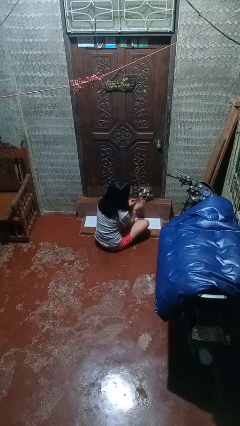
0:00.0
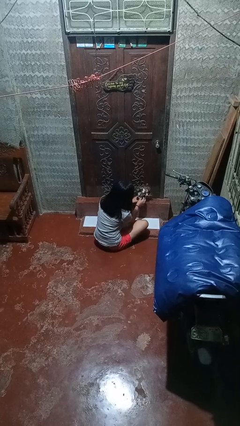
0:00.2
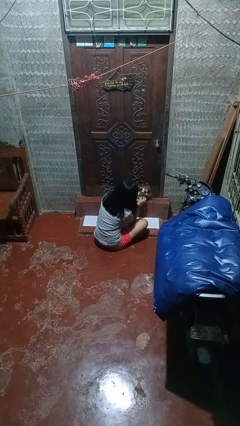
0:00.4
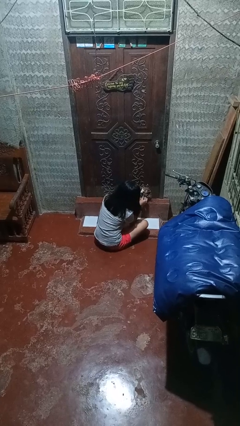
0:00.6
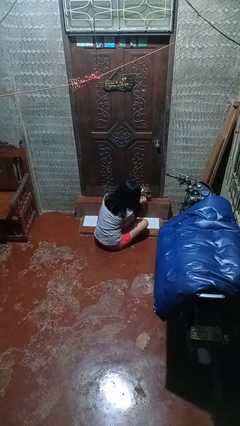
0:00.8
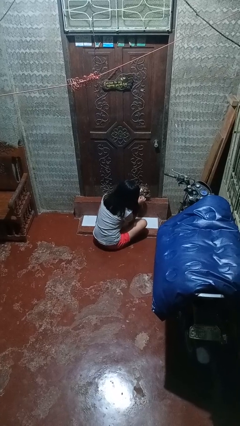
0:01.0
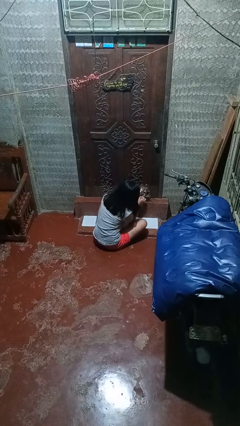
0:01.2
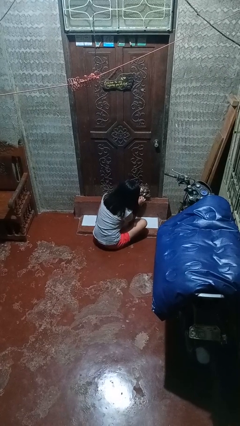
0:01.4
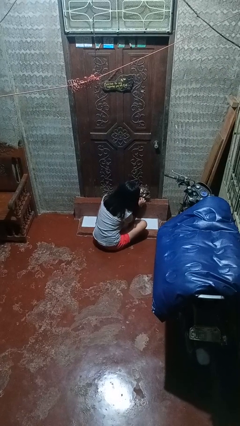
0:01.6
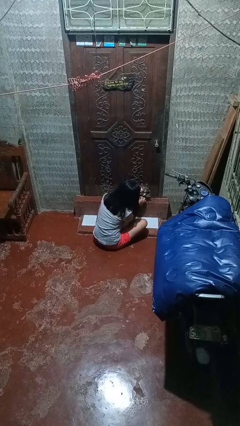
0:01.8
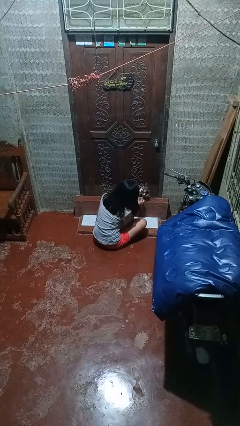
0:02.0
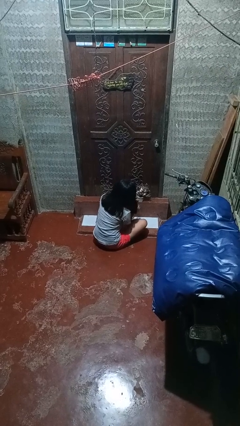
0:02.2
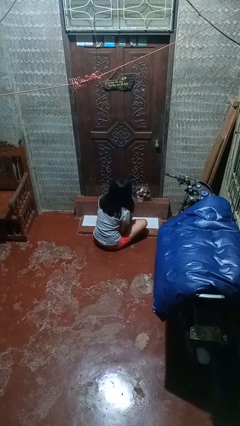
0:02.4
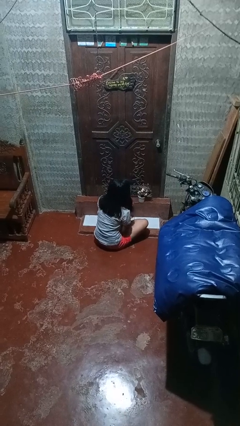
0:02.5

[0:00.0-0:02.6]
person arranges flowers in vase

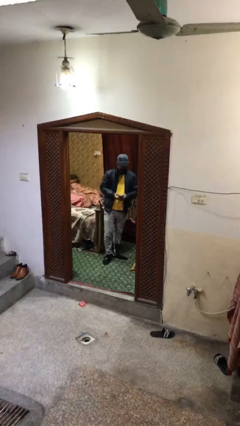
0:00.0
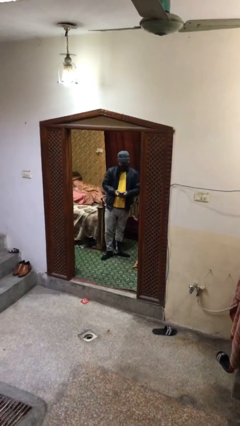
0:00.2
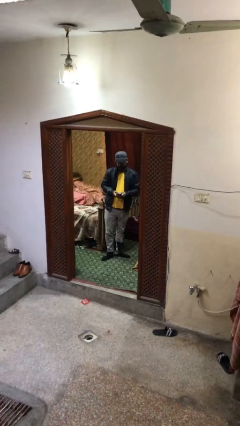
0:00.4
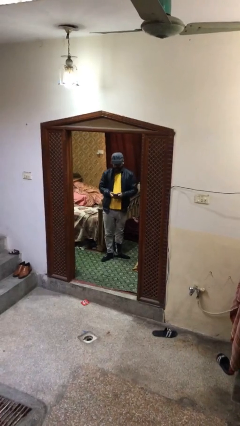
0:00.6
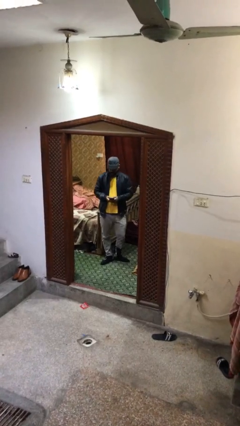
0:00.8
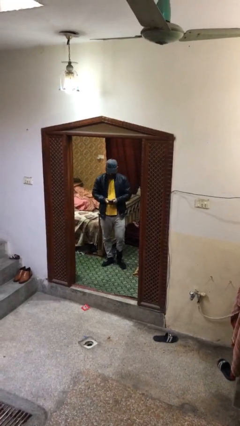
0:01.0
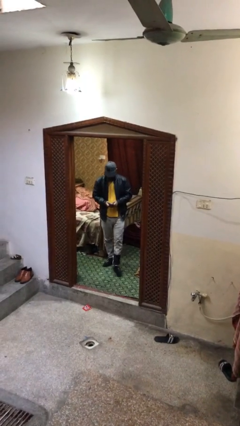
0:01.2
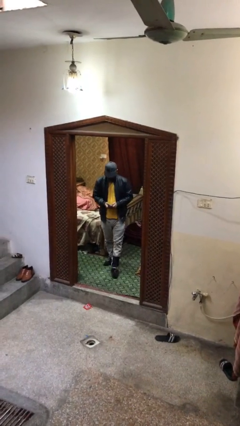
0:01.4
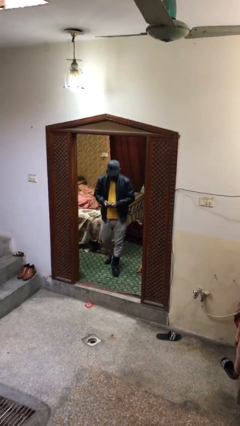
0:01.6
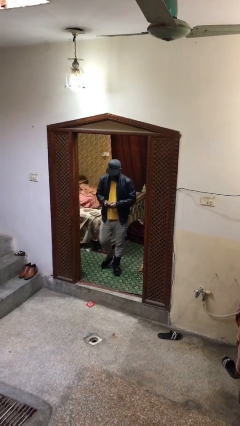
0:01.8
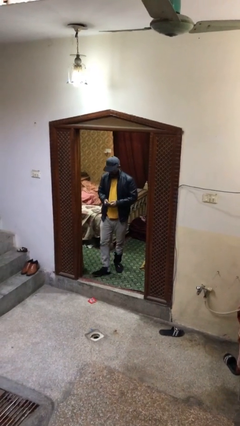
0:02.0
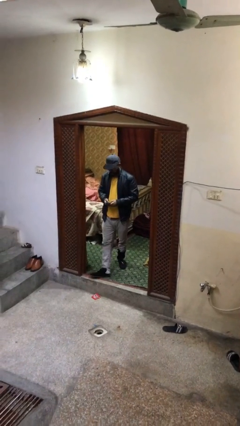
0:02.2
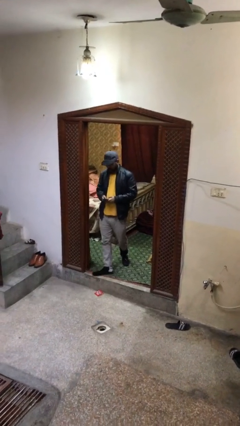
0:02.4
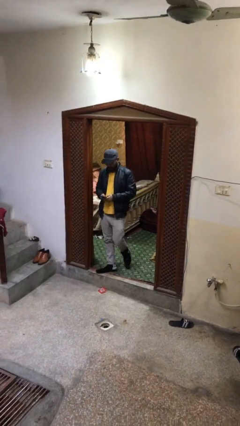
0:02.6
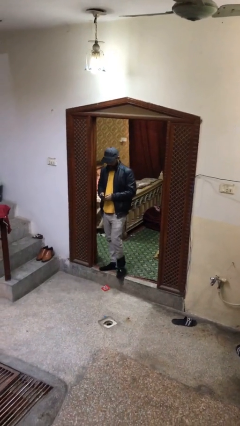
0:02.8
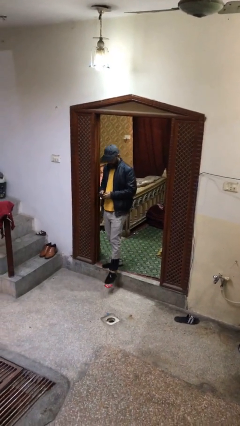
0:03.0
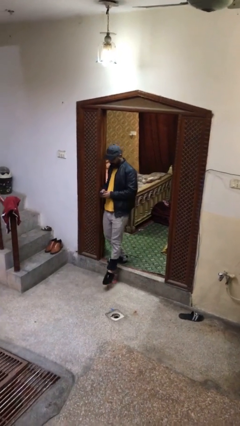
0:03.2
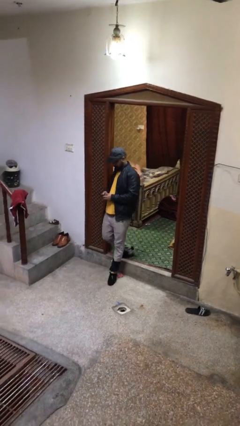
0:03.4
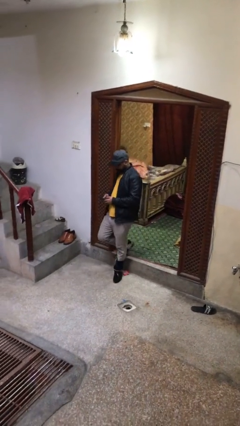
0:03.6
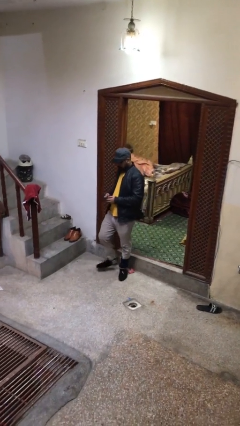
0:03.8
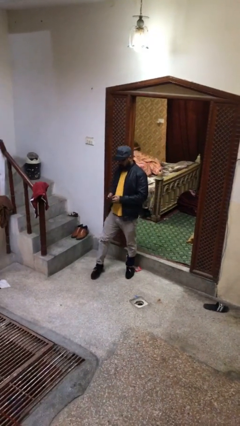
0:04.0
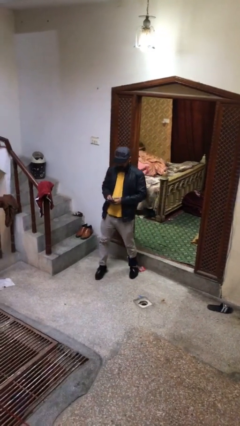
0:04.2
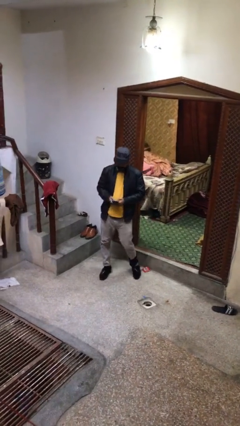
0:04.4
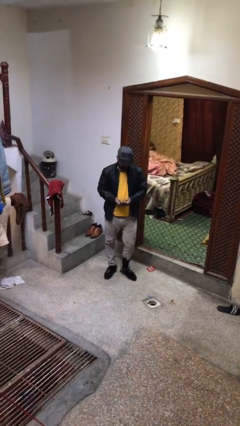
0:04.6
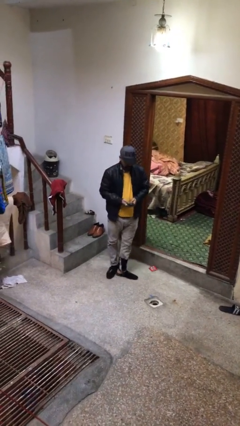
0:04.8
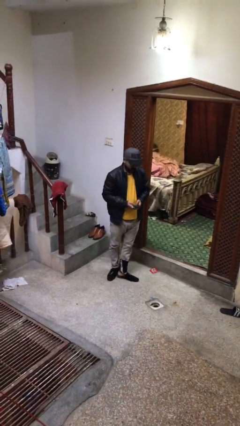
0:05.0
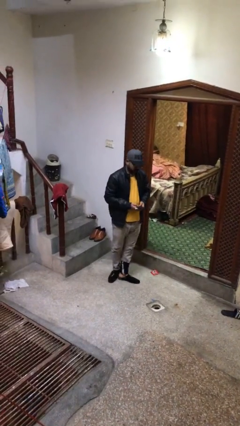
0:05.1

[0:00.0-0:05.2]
person enters scene through structure

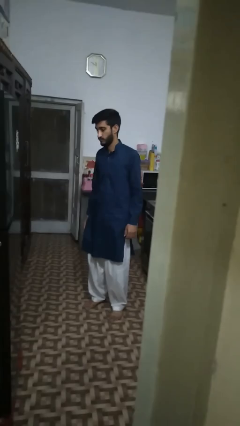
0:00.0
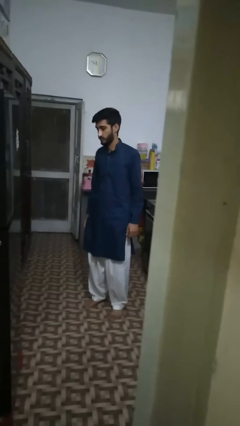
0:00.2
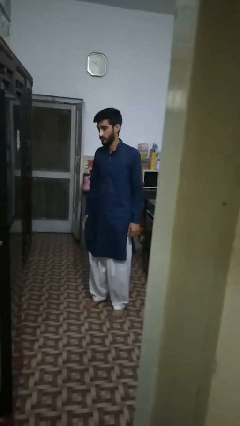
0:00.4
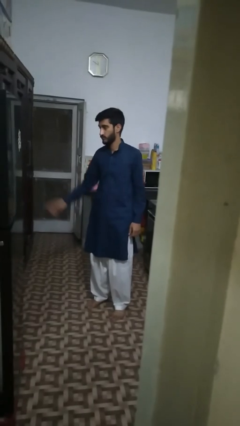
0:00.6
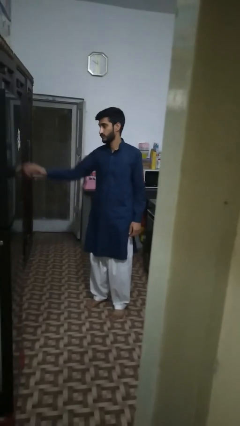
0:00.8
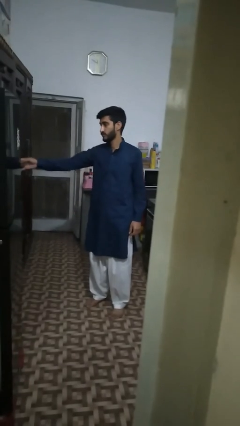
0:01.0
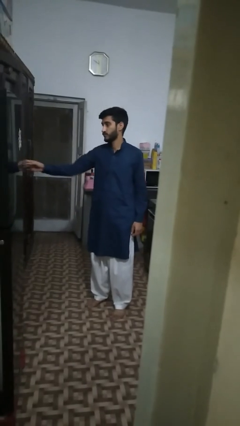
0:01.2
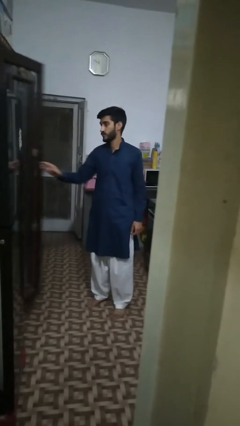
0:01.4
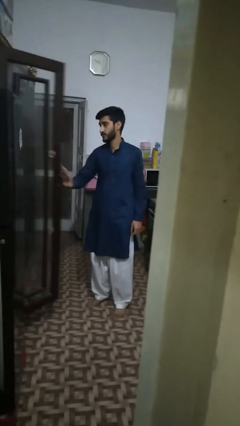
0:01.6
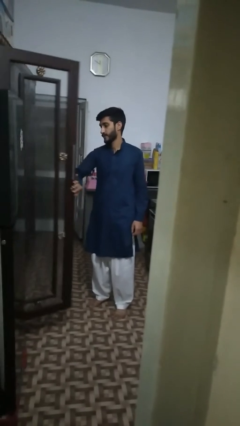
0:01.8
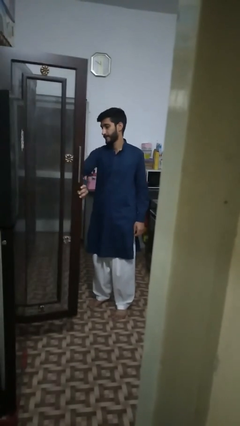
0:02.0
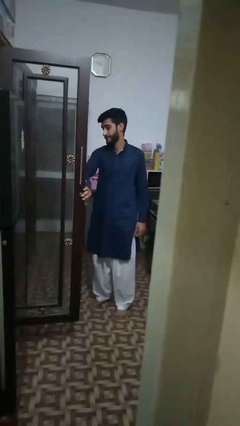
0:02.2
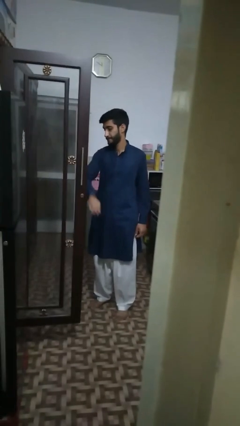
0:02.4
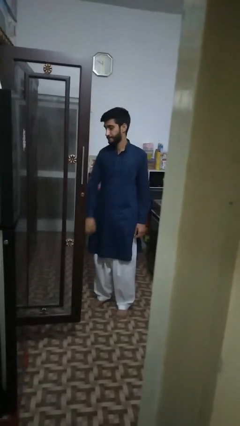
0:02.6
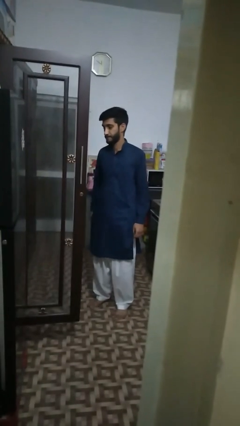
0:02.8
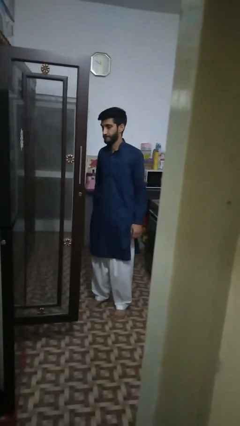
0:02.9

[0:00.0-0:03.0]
person opens cabinet

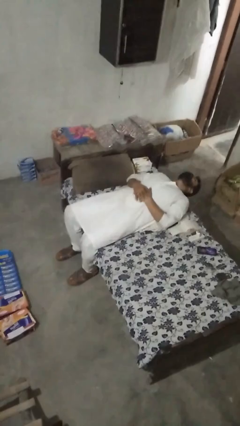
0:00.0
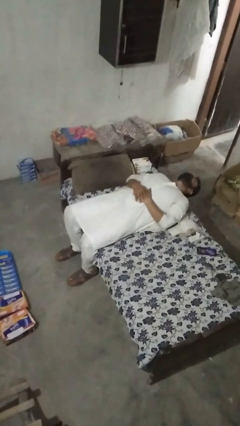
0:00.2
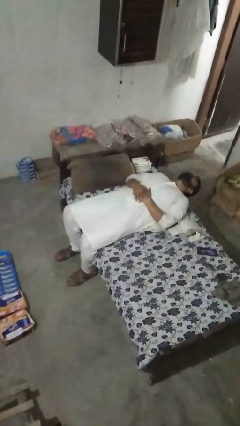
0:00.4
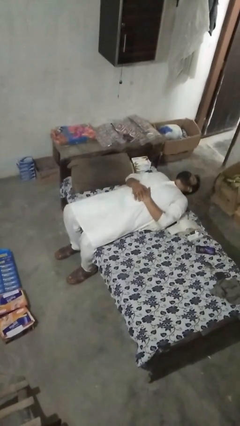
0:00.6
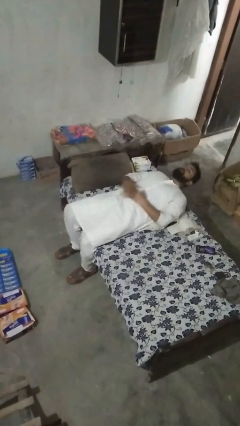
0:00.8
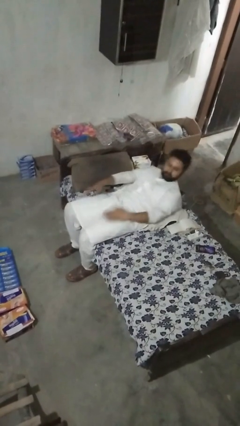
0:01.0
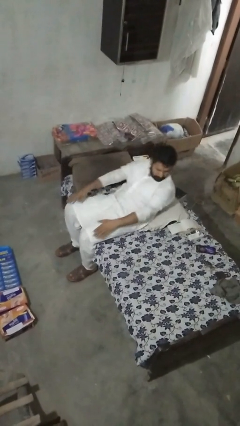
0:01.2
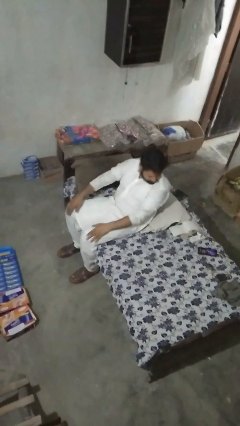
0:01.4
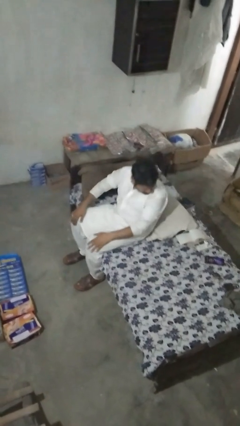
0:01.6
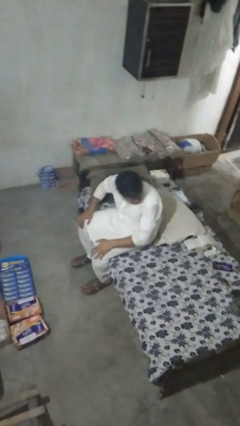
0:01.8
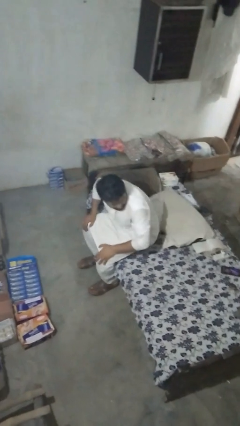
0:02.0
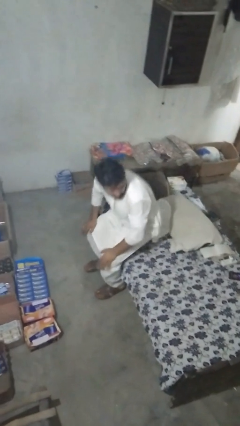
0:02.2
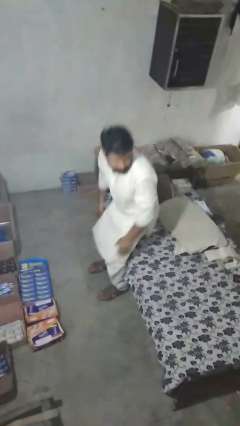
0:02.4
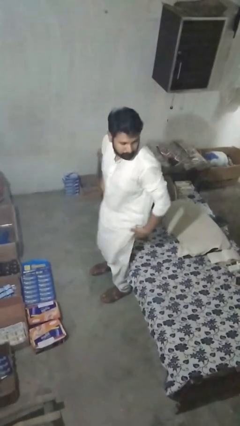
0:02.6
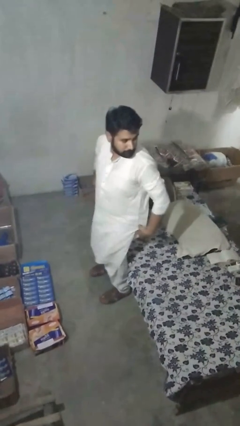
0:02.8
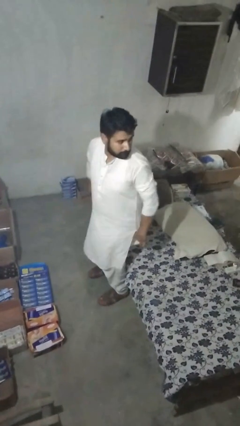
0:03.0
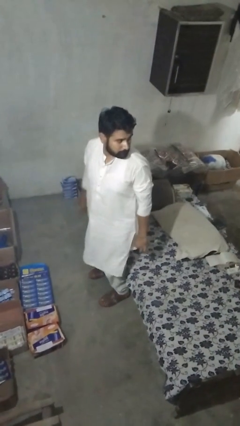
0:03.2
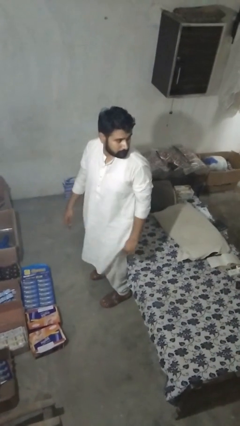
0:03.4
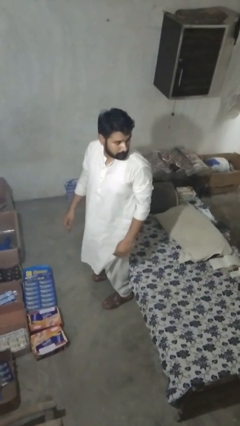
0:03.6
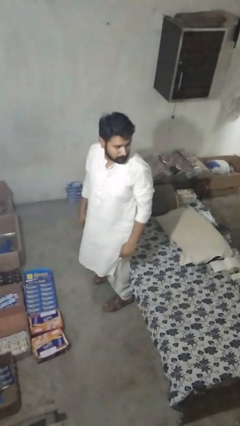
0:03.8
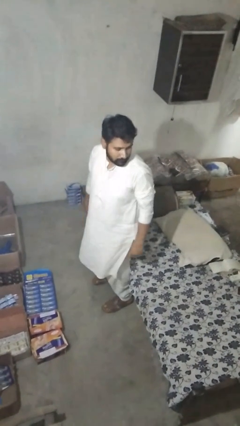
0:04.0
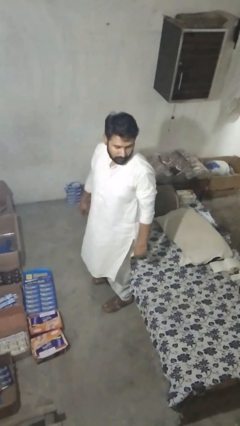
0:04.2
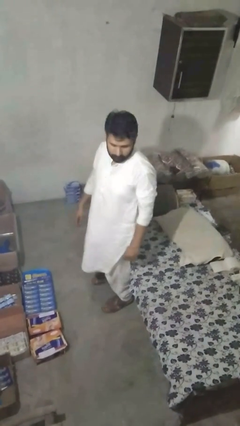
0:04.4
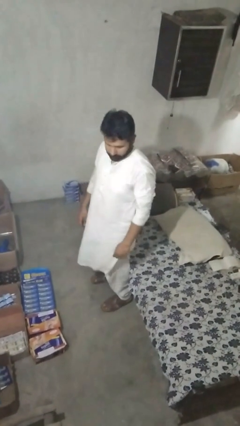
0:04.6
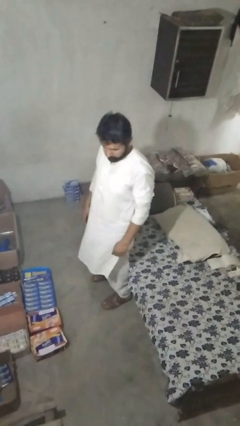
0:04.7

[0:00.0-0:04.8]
person stands up

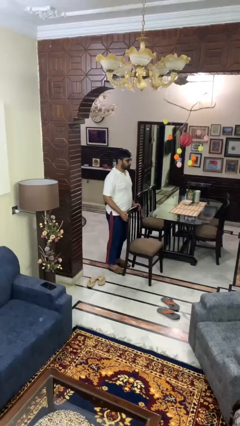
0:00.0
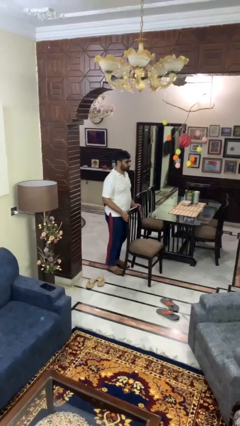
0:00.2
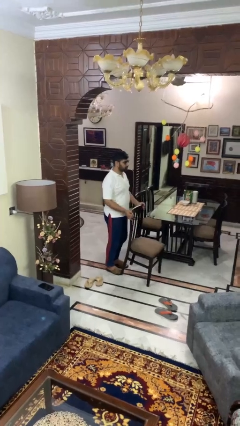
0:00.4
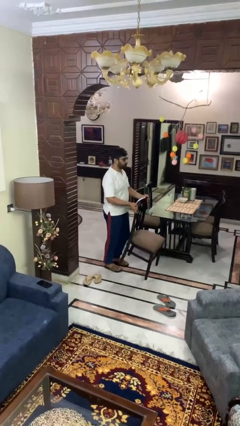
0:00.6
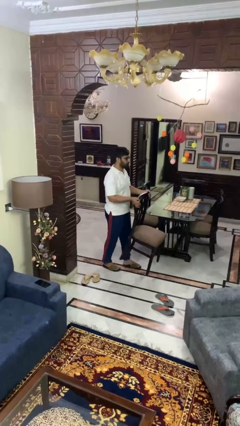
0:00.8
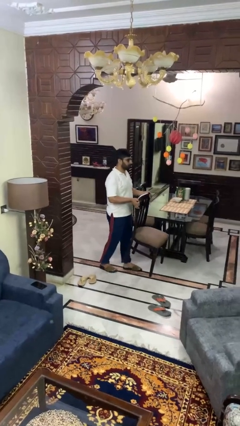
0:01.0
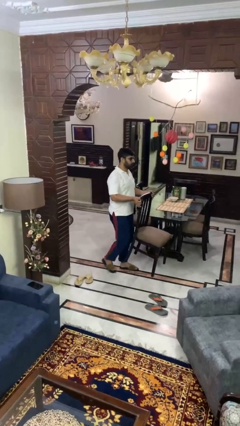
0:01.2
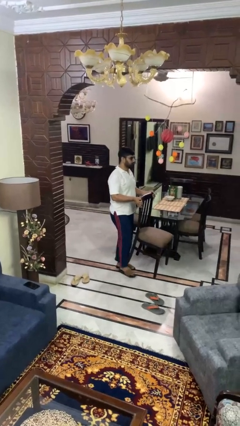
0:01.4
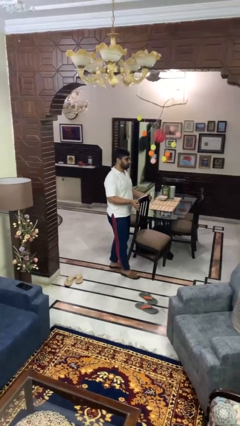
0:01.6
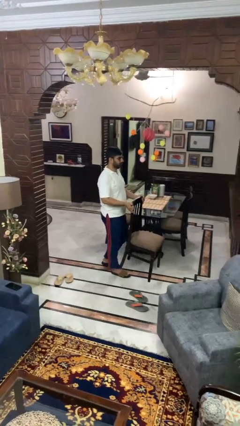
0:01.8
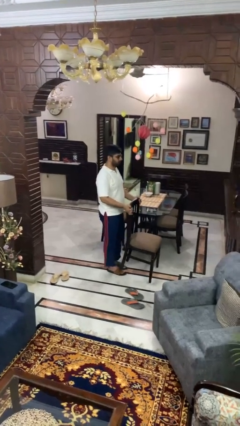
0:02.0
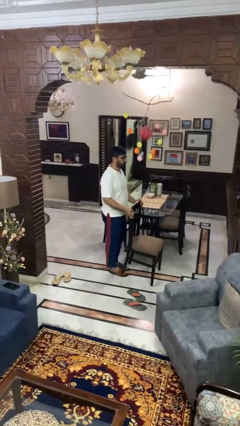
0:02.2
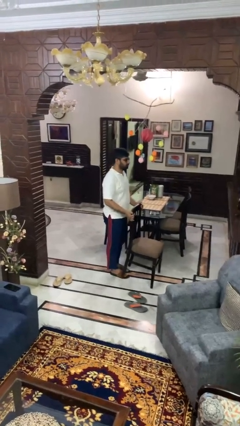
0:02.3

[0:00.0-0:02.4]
person carries furniture
